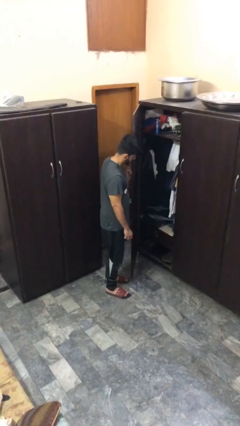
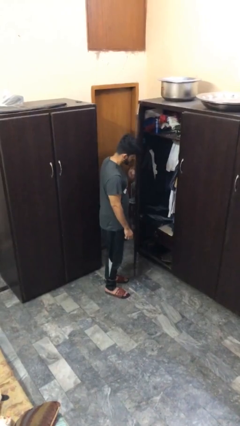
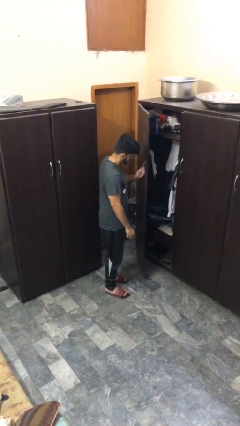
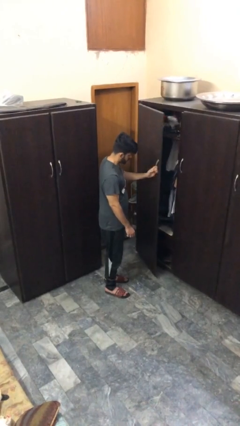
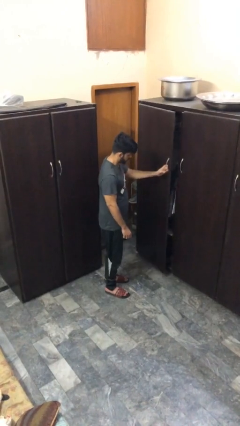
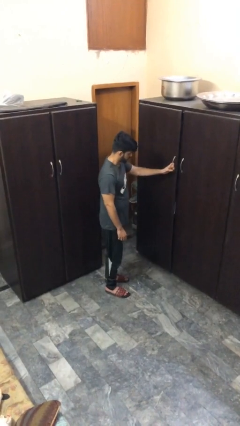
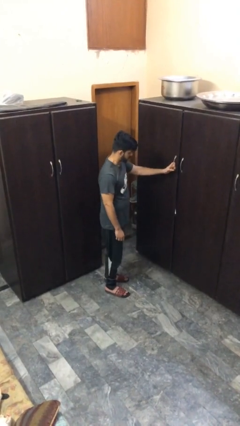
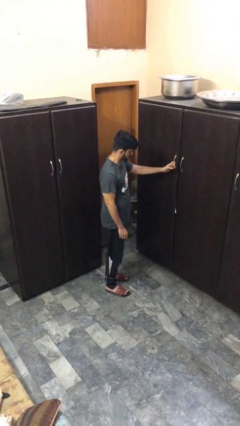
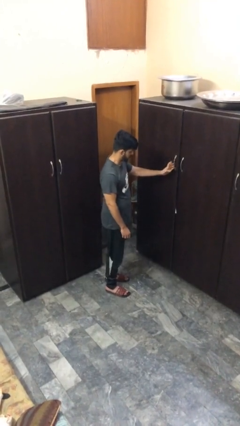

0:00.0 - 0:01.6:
person closes dresser drawer

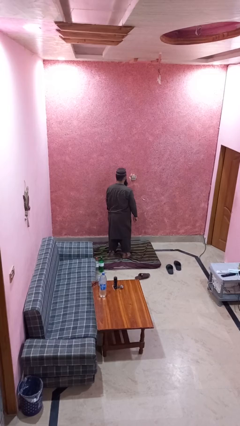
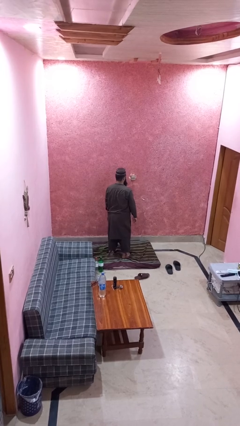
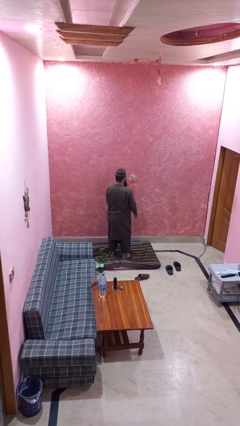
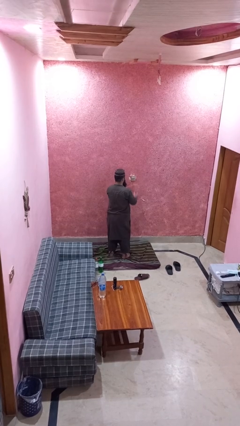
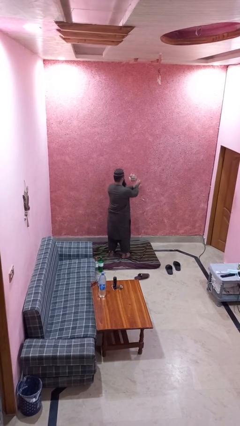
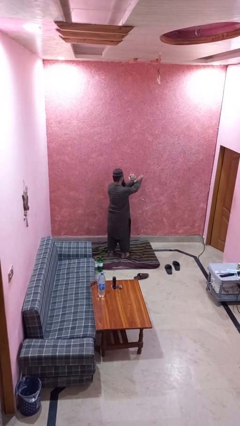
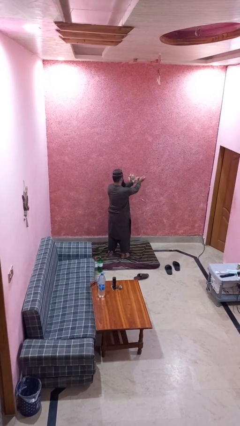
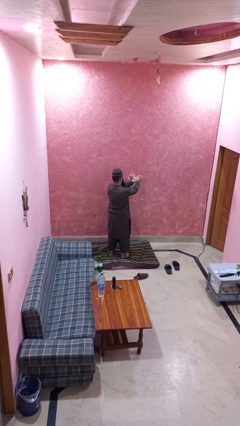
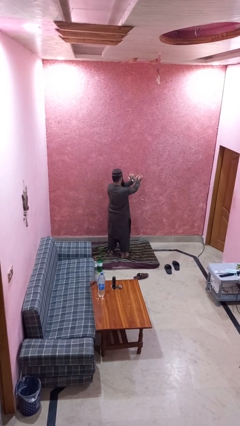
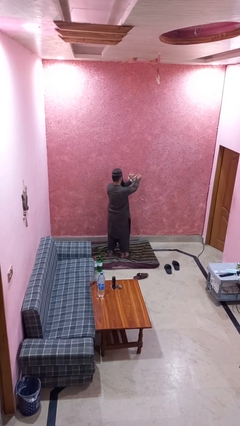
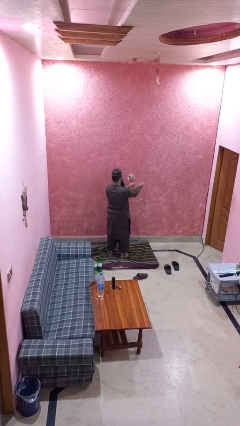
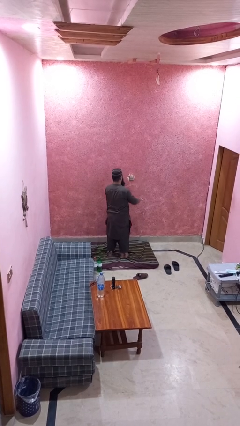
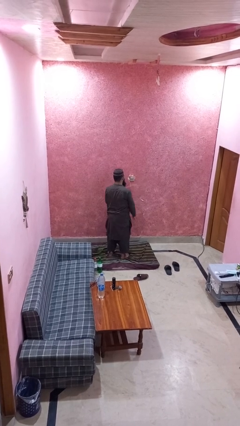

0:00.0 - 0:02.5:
person snaps fingers

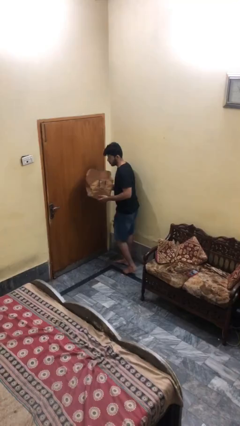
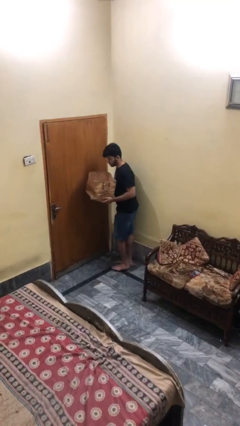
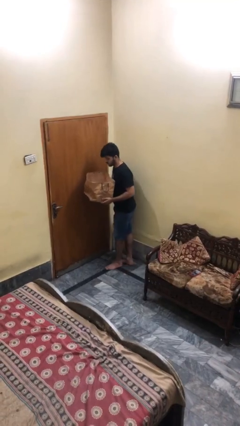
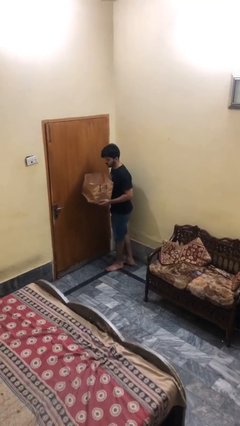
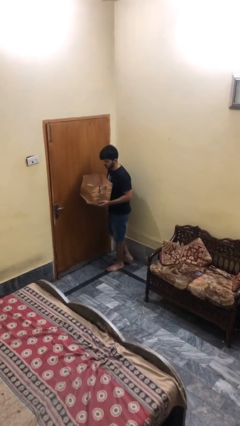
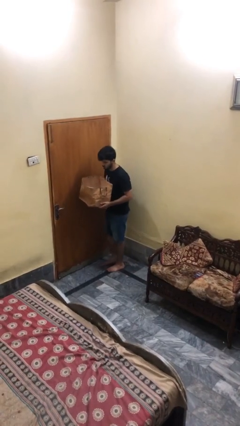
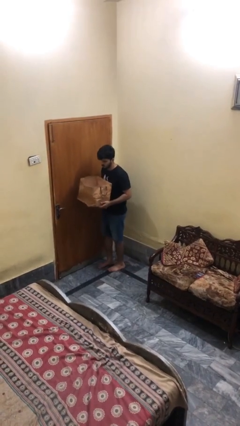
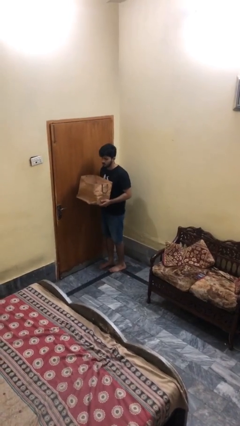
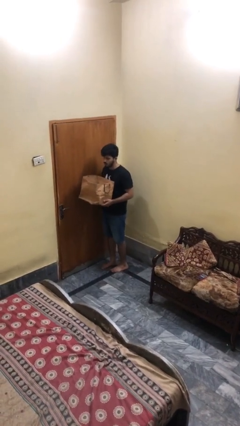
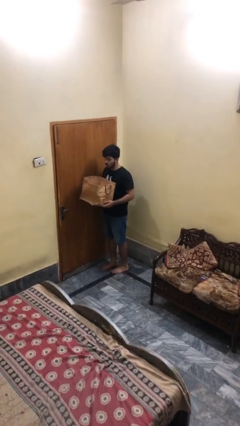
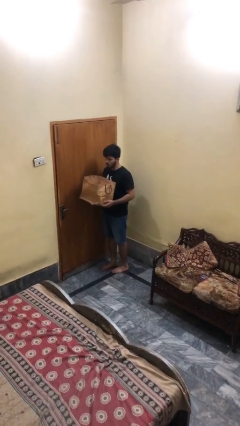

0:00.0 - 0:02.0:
person carries groceries

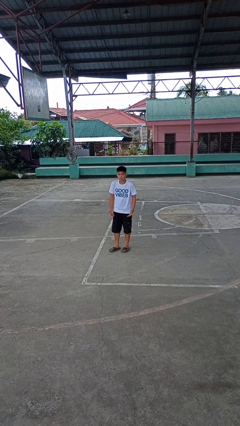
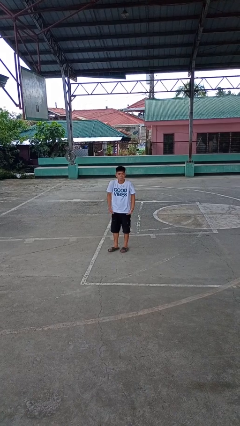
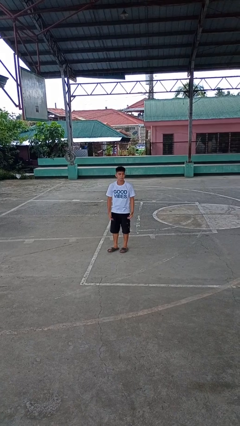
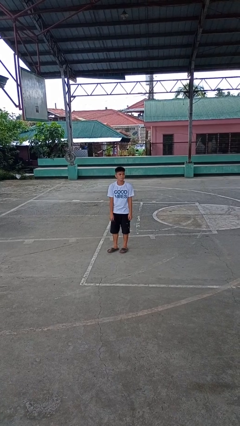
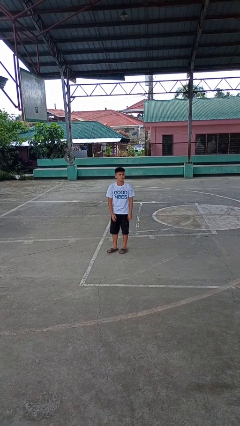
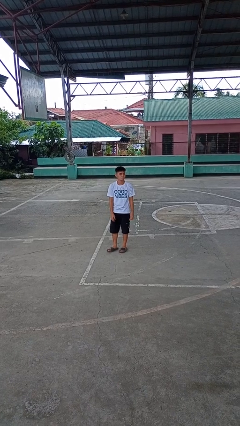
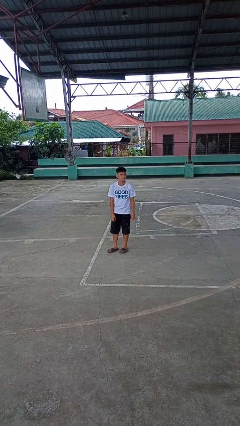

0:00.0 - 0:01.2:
person shrugs

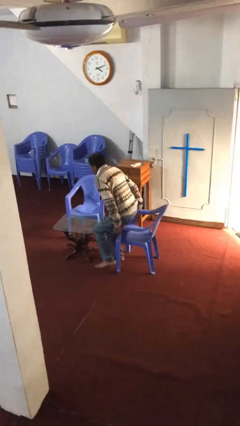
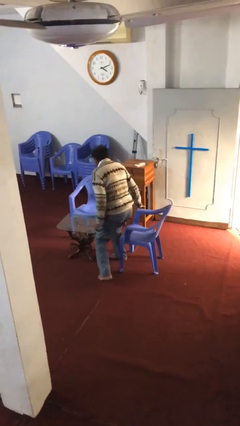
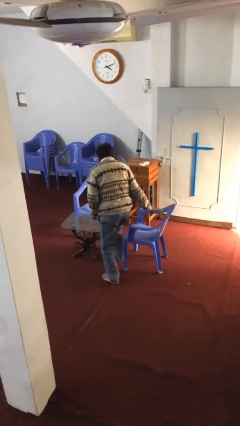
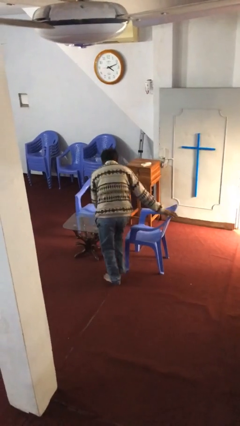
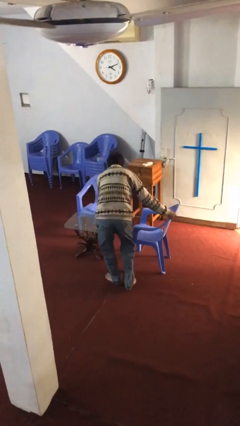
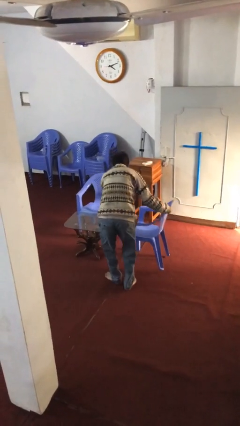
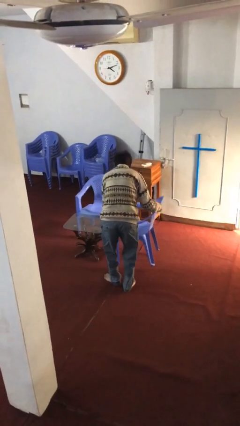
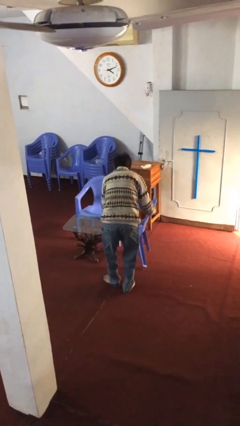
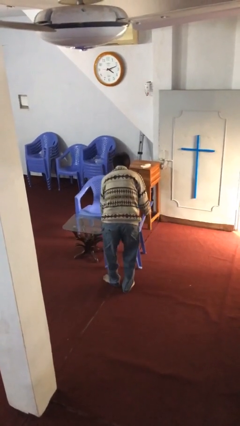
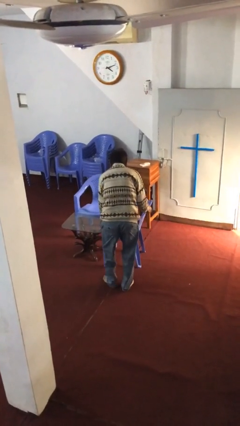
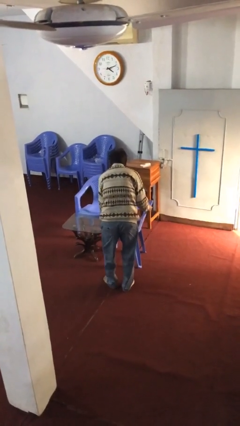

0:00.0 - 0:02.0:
person stands up

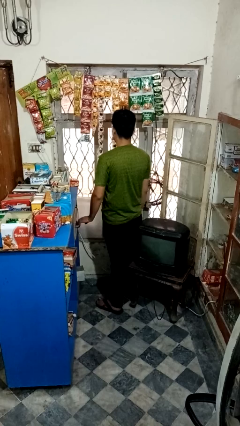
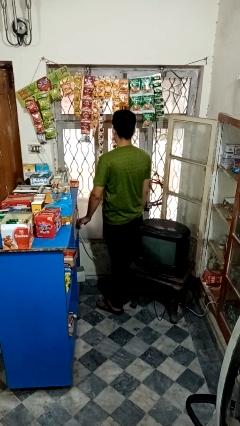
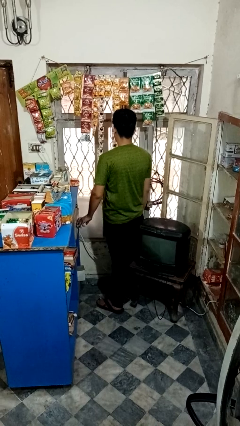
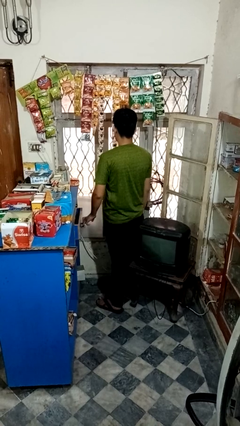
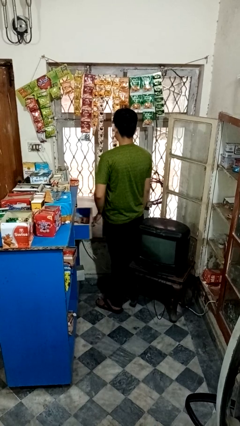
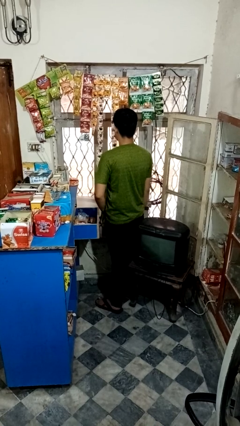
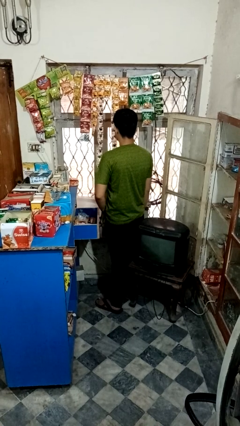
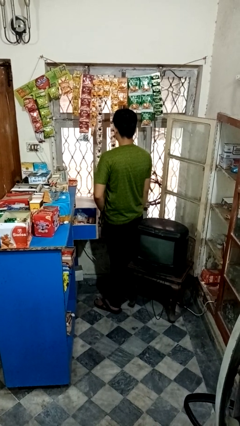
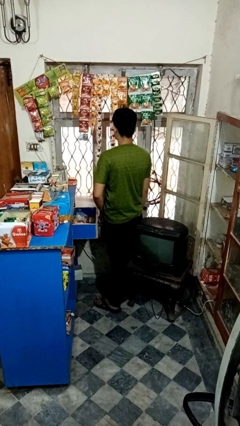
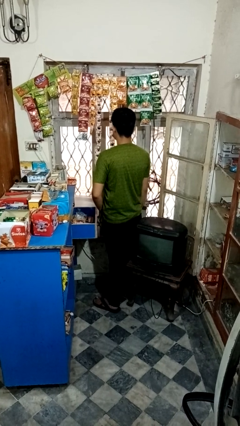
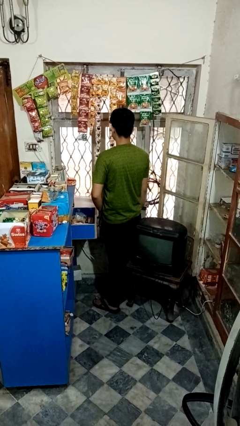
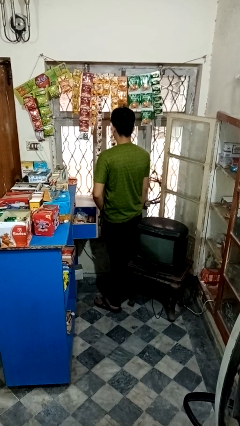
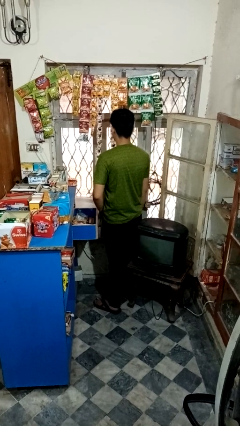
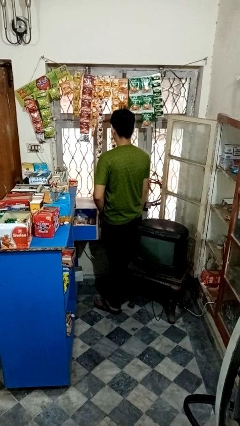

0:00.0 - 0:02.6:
person opens kitchen drawer

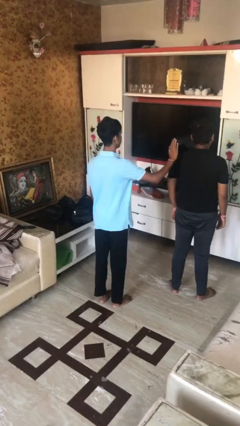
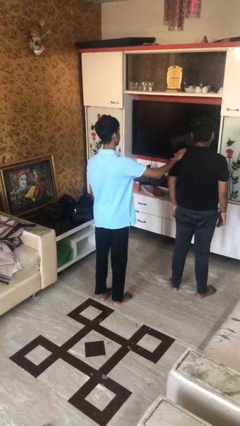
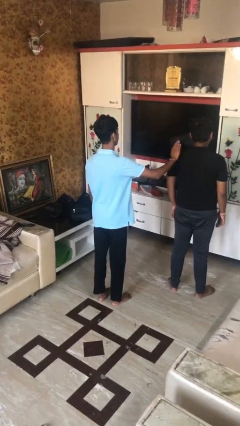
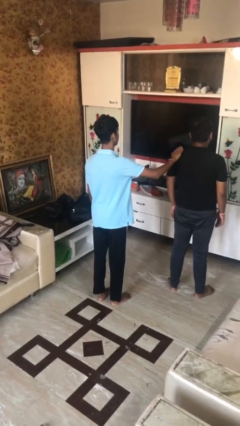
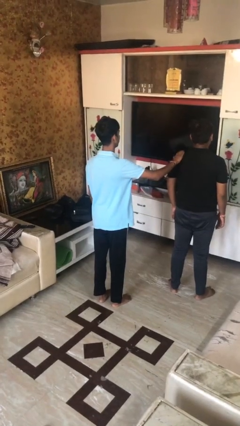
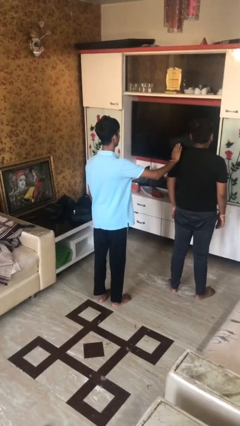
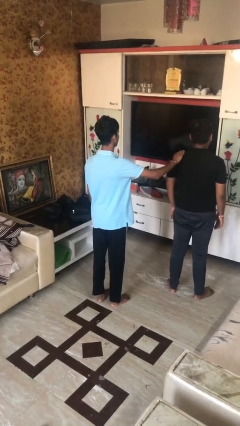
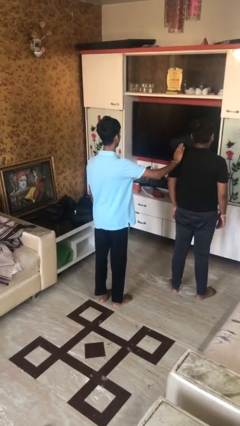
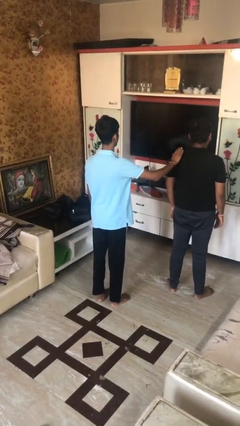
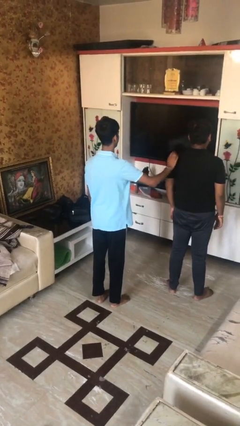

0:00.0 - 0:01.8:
person pounds shoulders of person

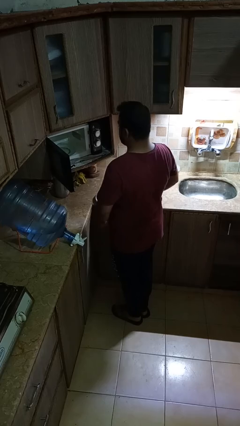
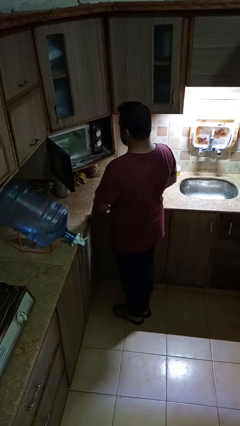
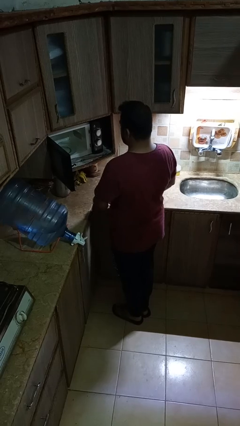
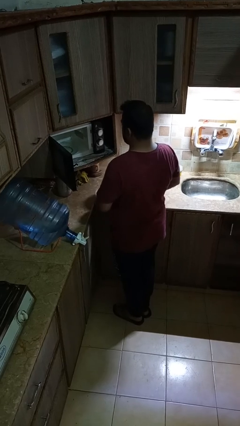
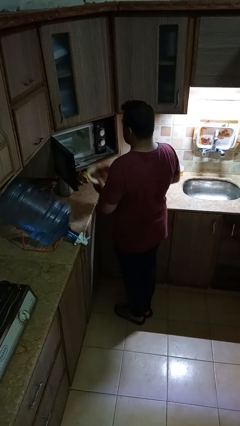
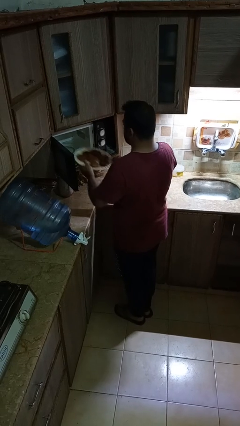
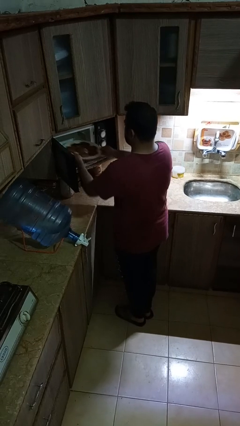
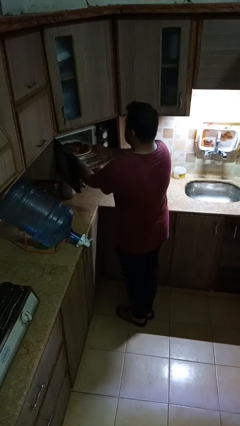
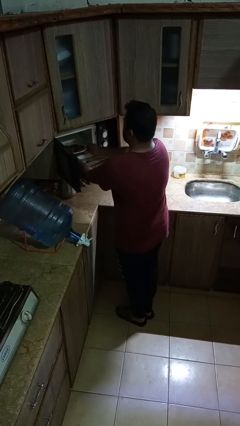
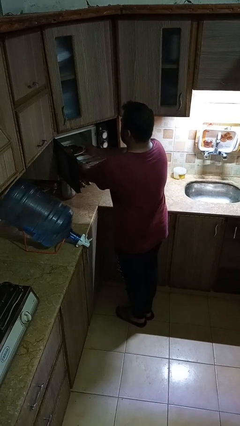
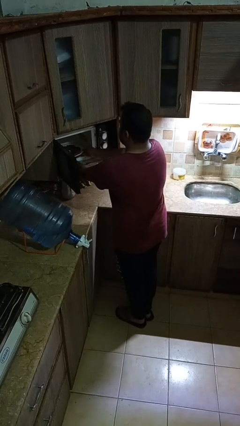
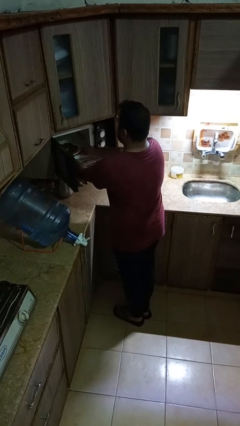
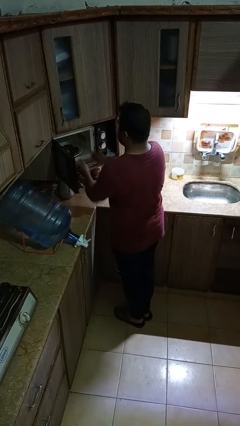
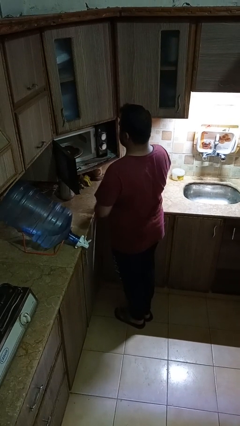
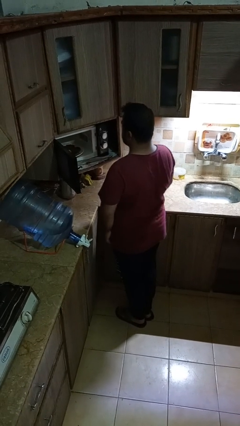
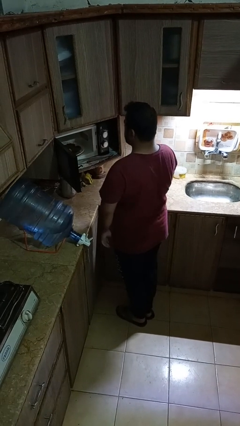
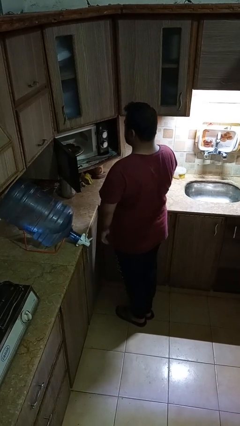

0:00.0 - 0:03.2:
person puts object into microwave
